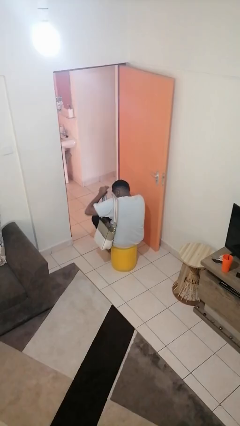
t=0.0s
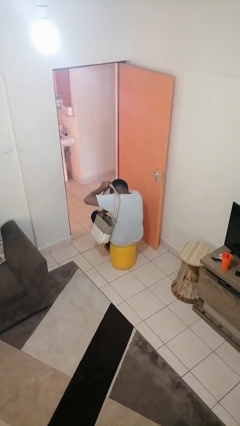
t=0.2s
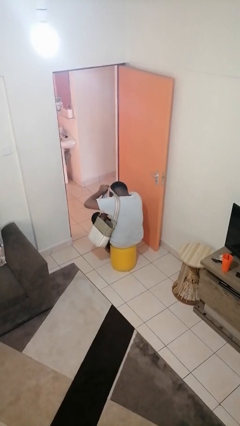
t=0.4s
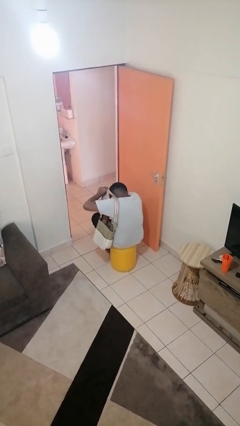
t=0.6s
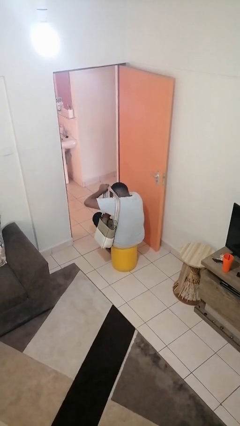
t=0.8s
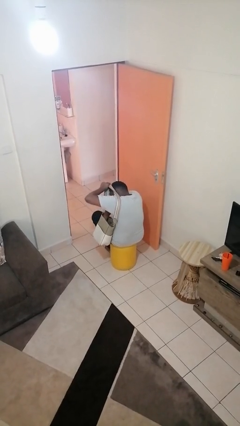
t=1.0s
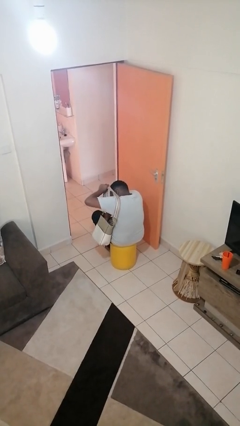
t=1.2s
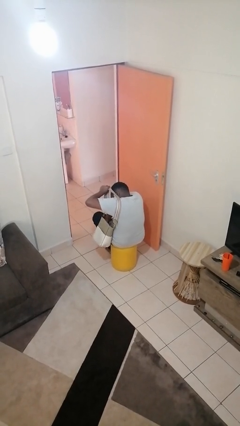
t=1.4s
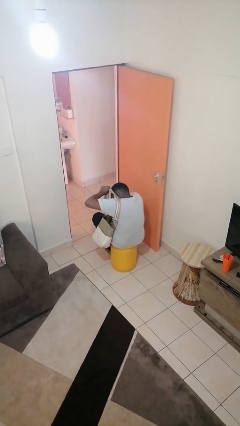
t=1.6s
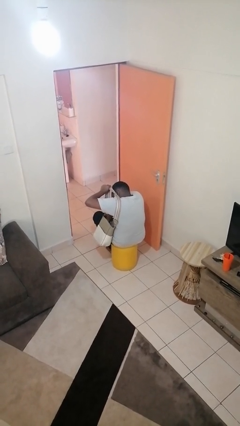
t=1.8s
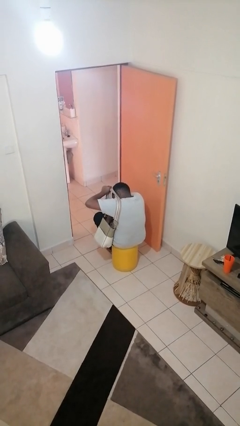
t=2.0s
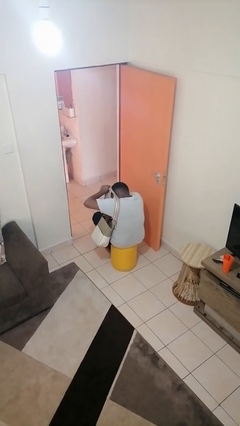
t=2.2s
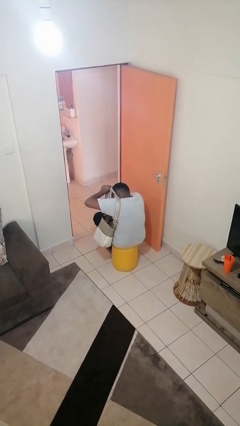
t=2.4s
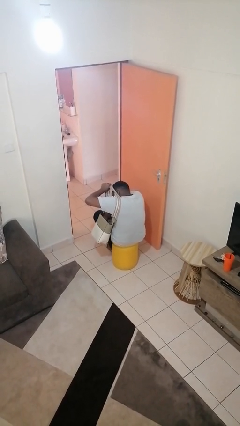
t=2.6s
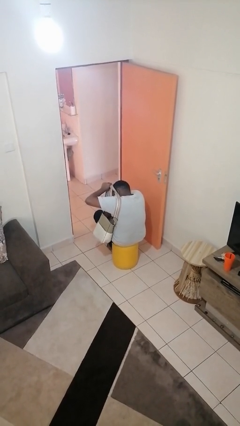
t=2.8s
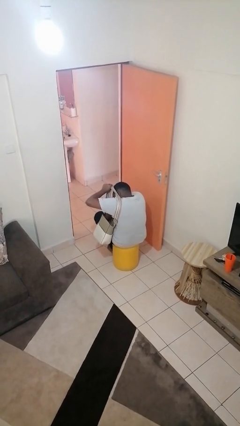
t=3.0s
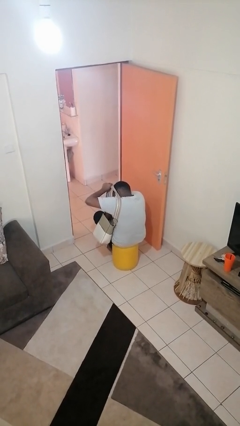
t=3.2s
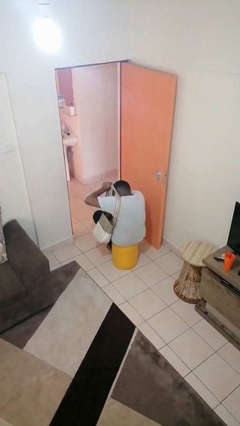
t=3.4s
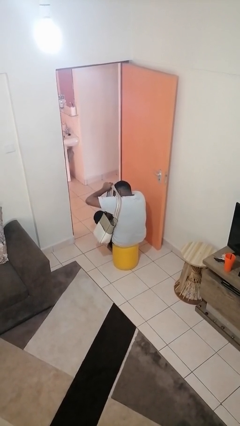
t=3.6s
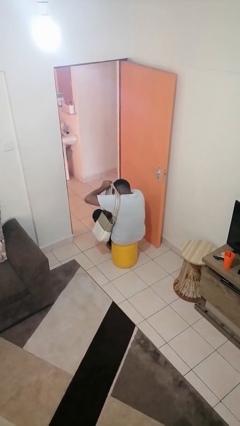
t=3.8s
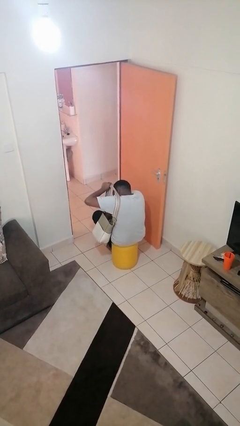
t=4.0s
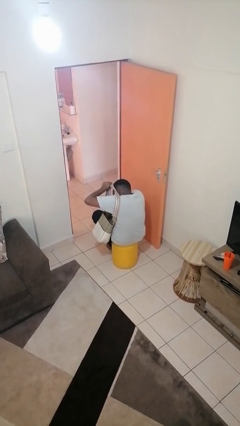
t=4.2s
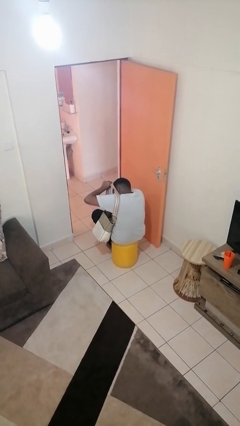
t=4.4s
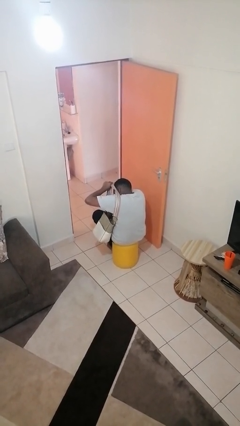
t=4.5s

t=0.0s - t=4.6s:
person searches in purse

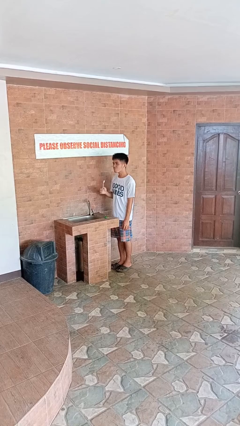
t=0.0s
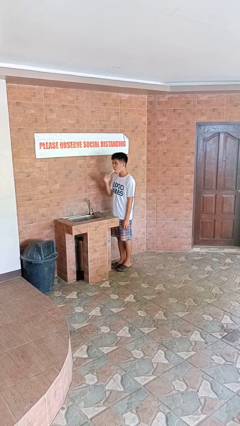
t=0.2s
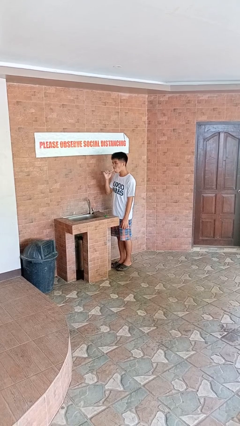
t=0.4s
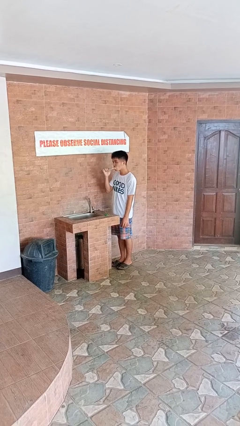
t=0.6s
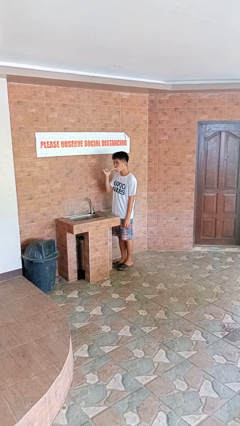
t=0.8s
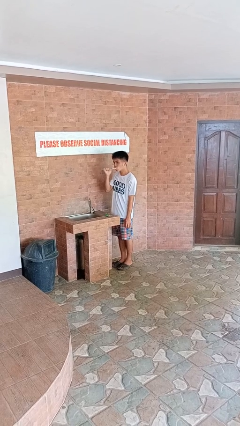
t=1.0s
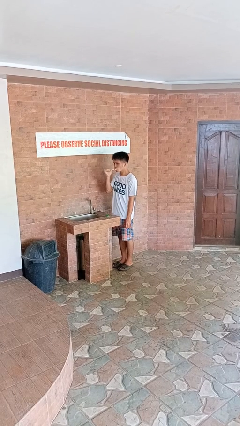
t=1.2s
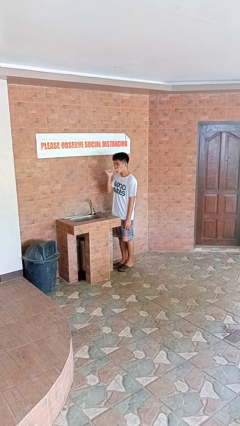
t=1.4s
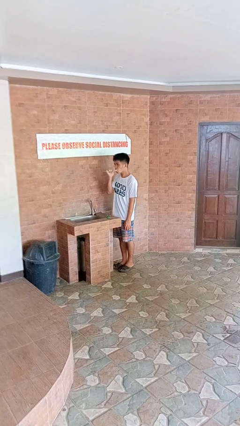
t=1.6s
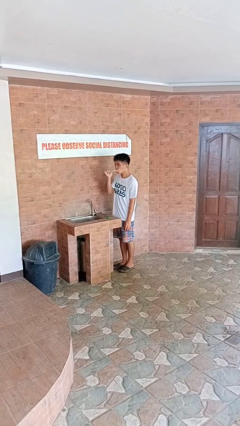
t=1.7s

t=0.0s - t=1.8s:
person brushes teeth

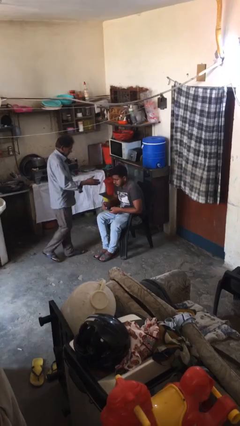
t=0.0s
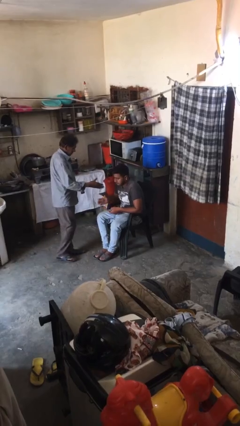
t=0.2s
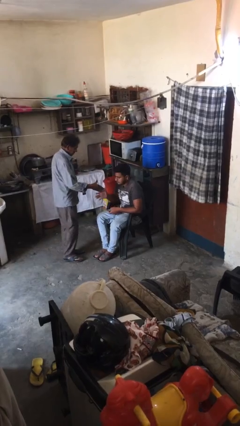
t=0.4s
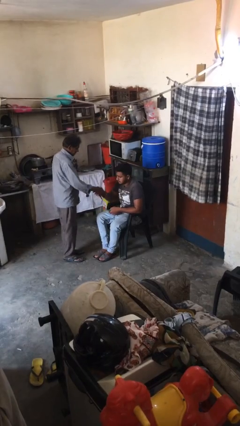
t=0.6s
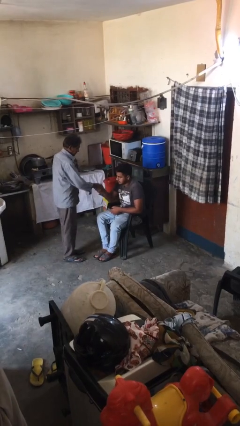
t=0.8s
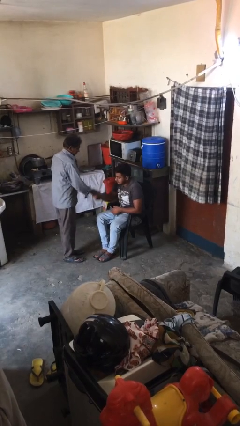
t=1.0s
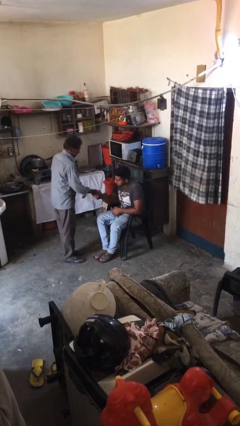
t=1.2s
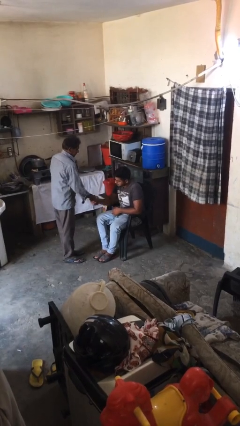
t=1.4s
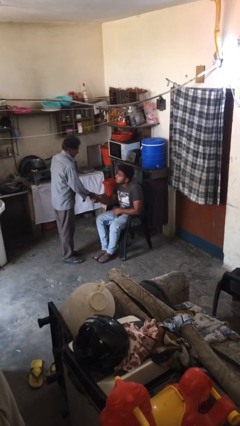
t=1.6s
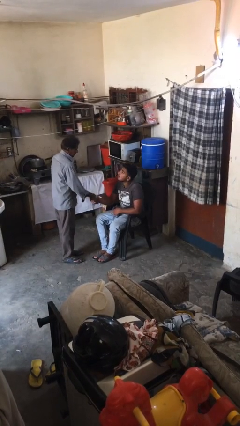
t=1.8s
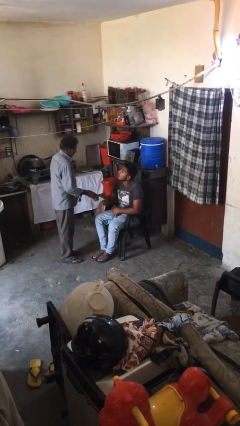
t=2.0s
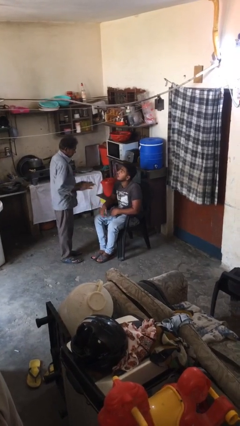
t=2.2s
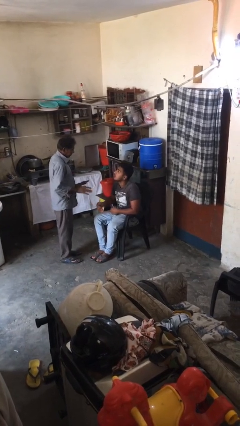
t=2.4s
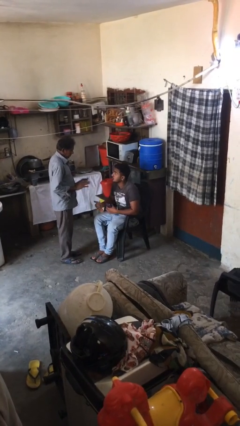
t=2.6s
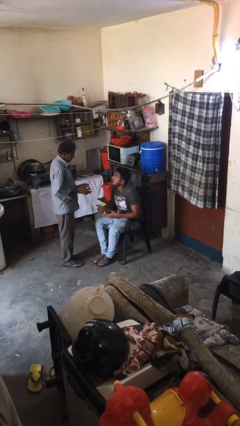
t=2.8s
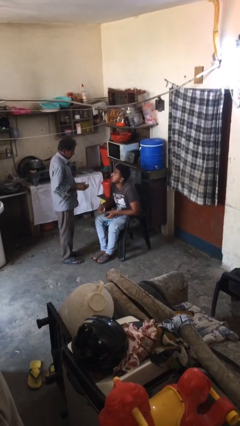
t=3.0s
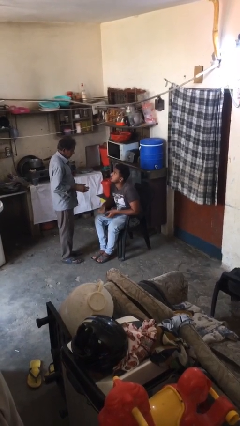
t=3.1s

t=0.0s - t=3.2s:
person shakes hand

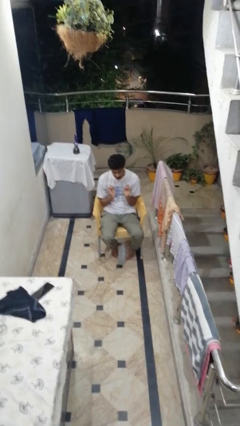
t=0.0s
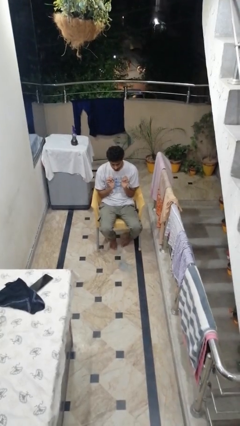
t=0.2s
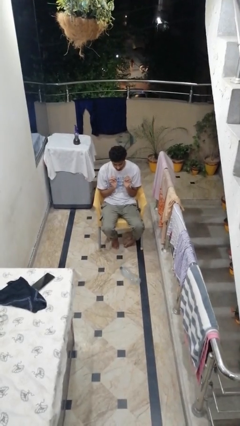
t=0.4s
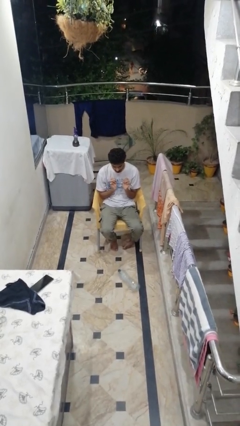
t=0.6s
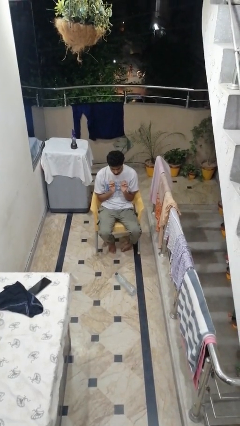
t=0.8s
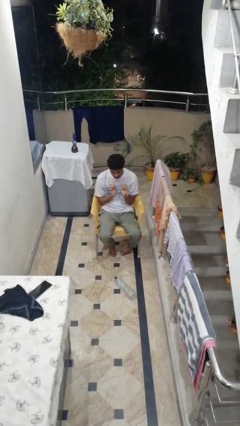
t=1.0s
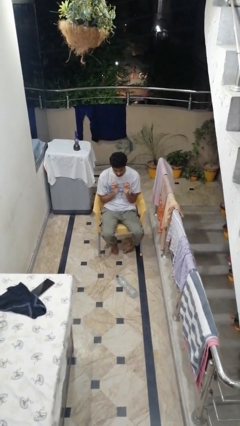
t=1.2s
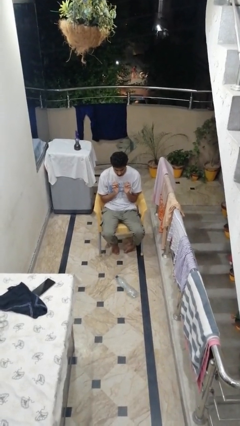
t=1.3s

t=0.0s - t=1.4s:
person drops object

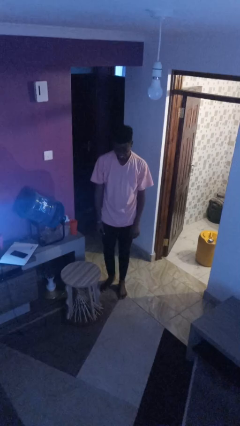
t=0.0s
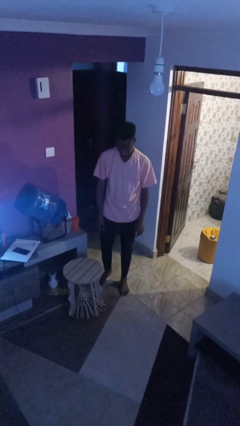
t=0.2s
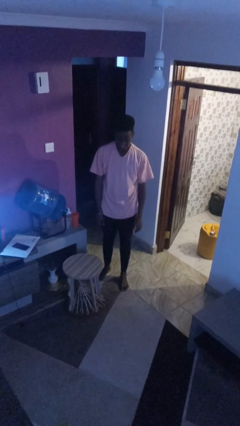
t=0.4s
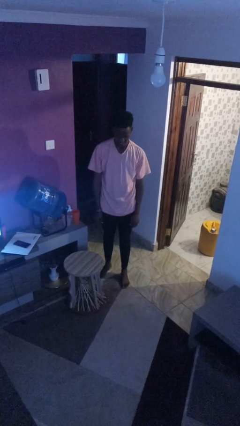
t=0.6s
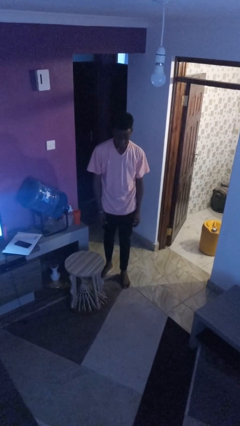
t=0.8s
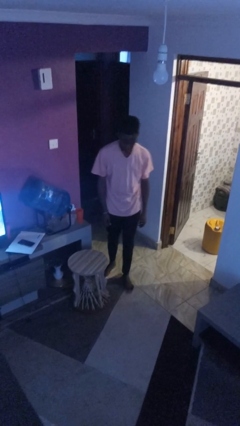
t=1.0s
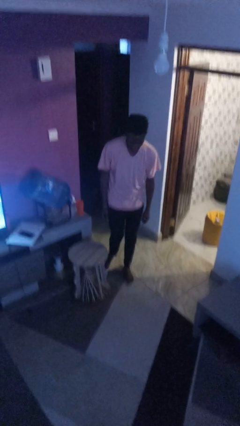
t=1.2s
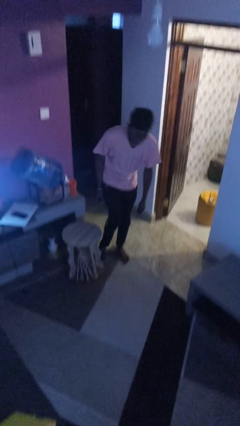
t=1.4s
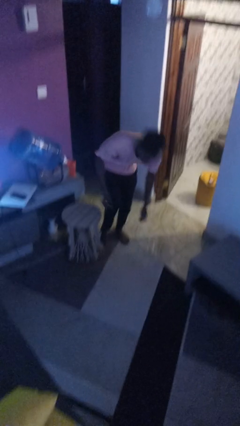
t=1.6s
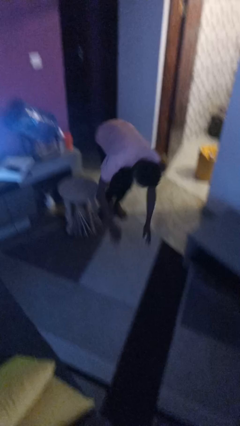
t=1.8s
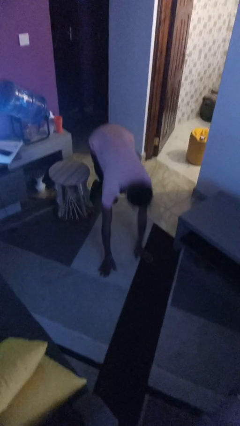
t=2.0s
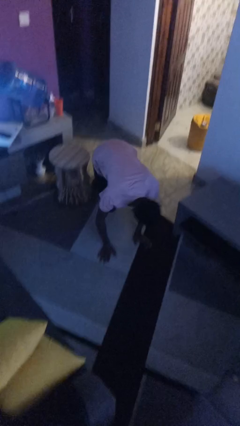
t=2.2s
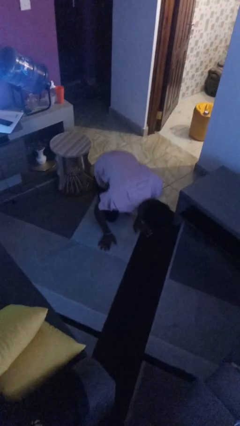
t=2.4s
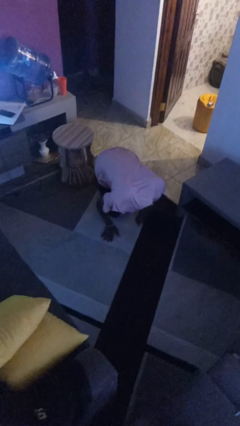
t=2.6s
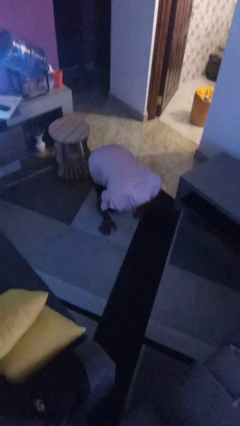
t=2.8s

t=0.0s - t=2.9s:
person trips on object on floor

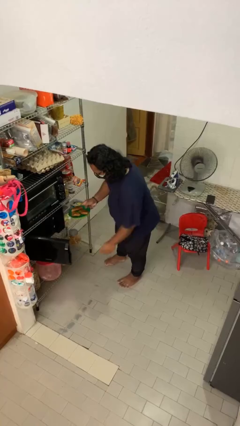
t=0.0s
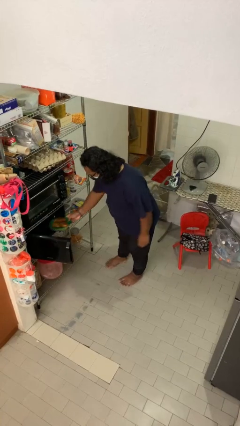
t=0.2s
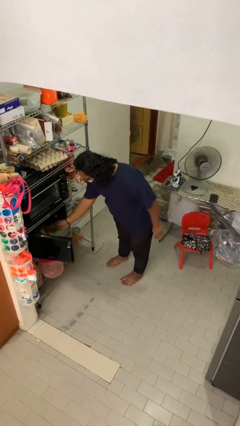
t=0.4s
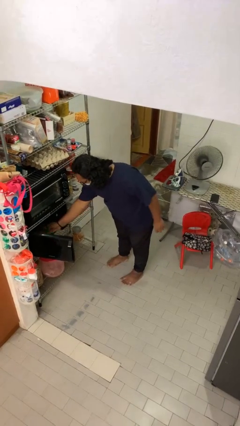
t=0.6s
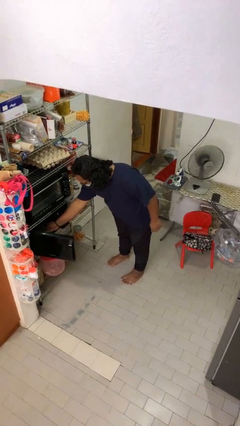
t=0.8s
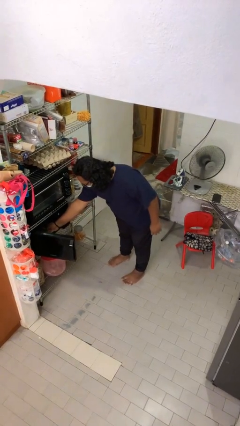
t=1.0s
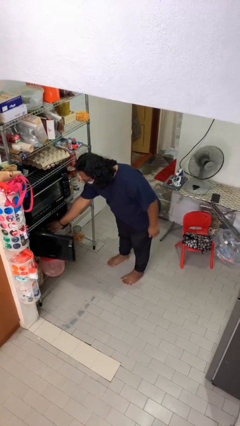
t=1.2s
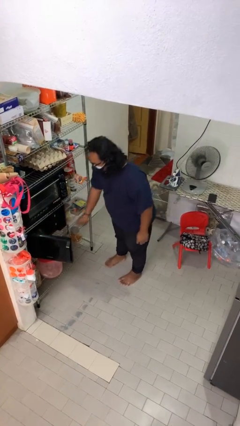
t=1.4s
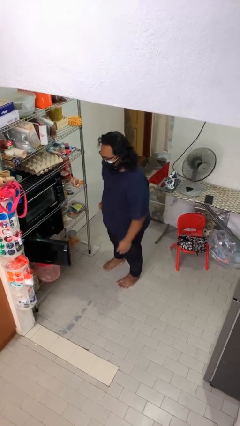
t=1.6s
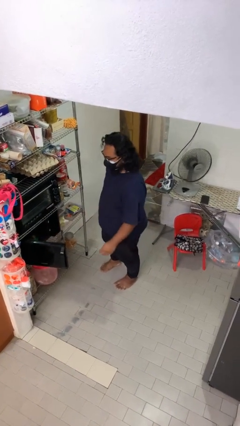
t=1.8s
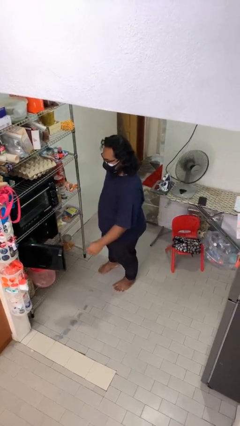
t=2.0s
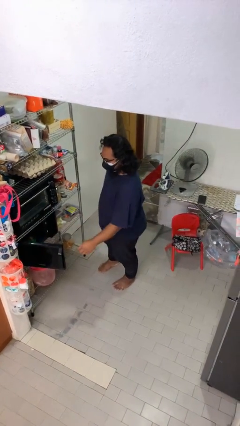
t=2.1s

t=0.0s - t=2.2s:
person puts object into microwave

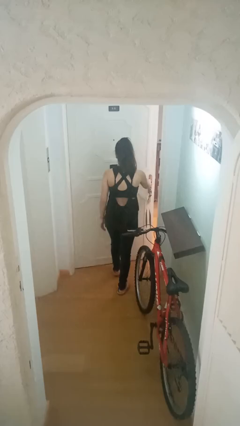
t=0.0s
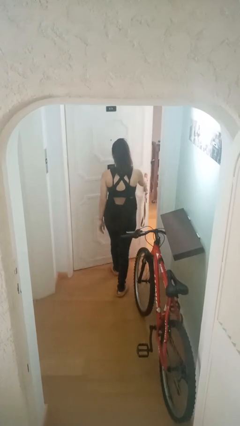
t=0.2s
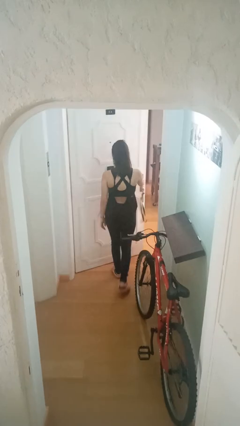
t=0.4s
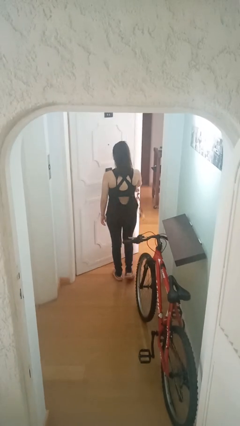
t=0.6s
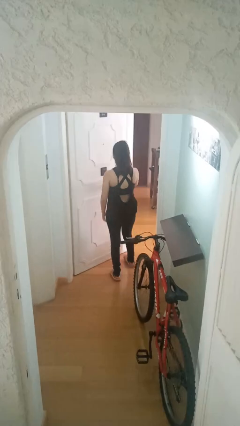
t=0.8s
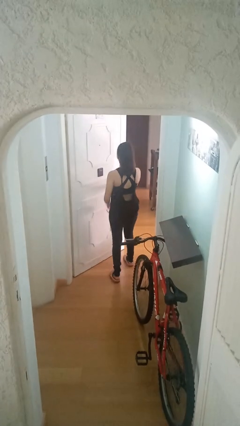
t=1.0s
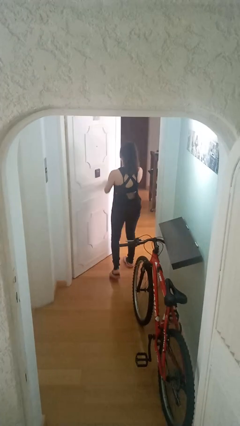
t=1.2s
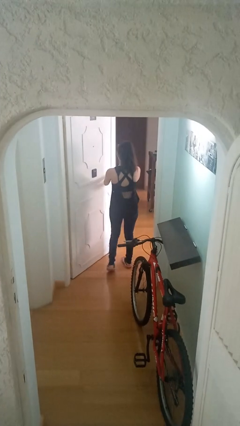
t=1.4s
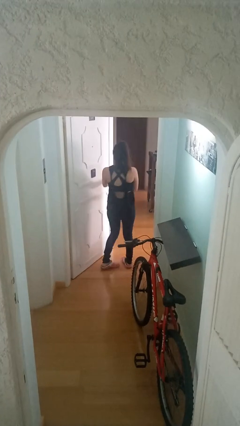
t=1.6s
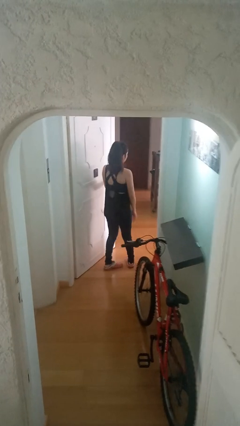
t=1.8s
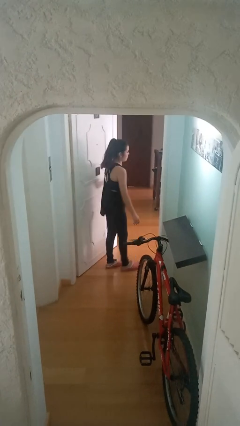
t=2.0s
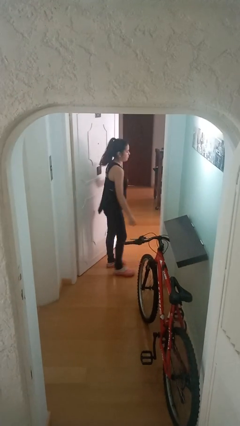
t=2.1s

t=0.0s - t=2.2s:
person opens facility door
